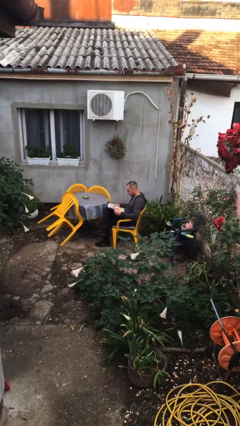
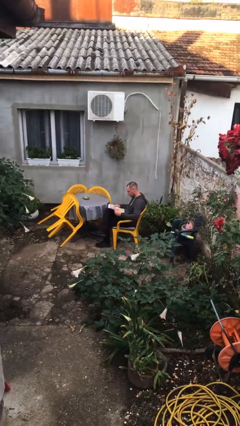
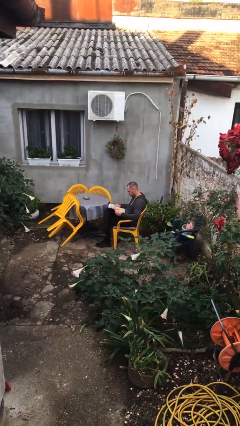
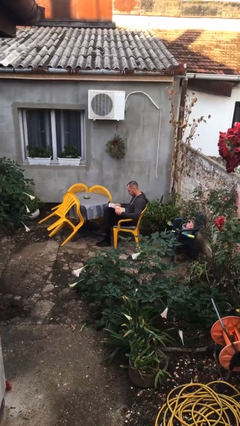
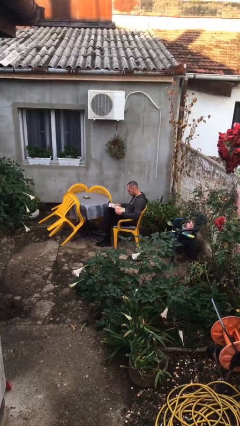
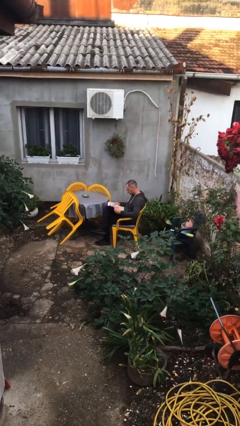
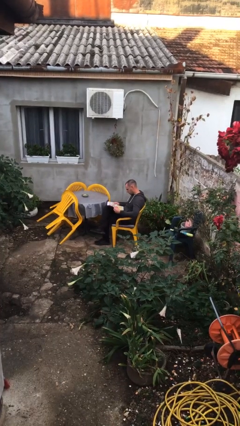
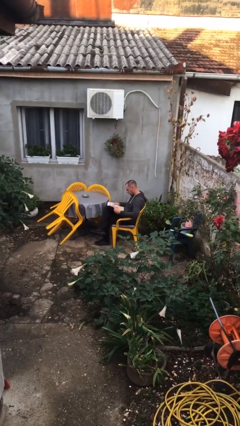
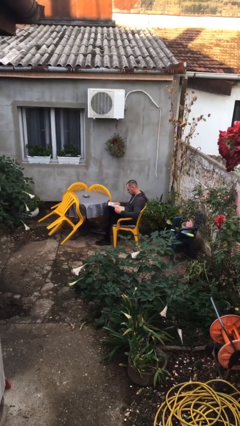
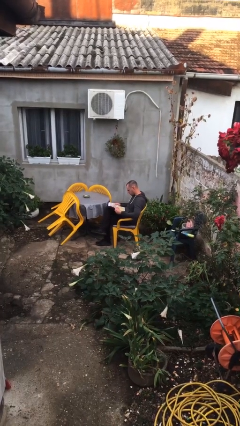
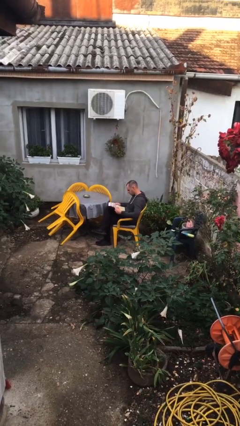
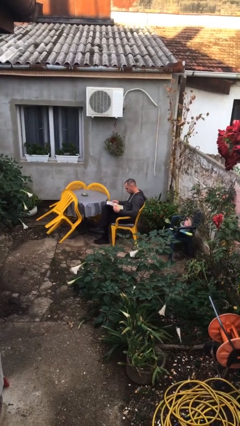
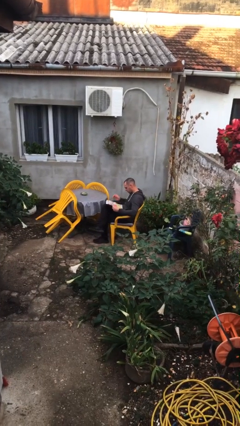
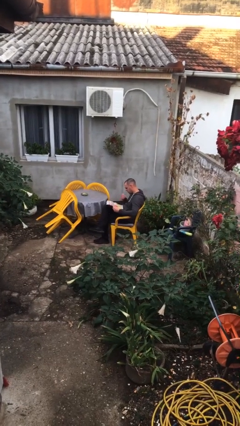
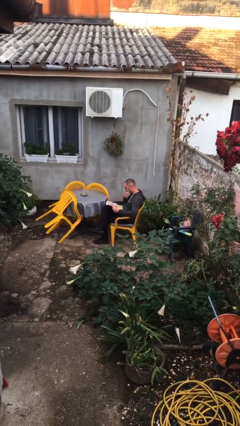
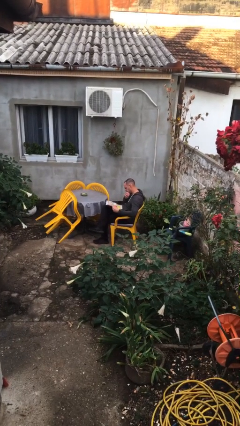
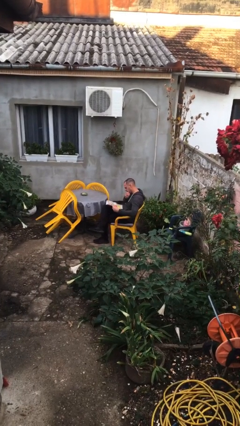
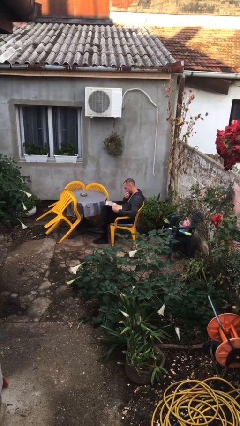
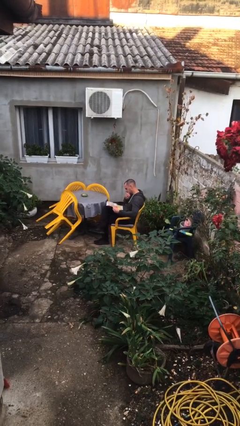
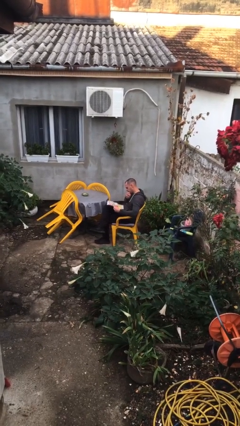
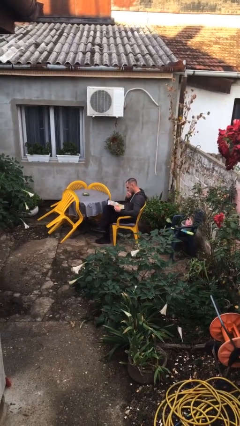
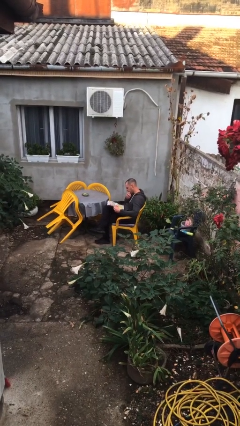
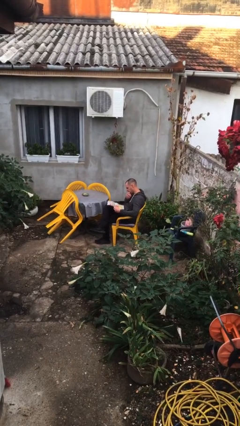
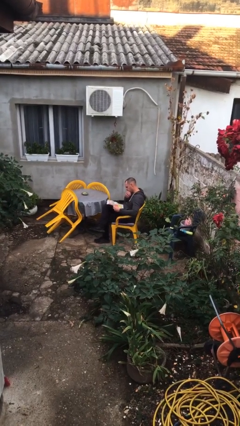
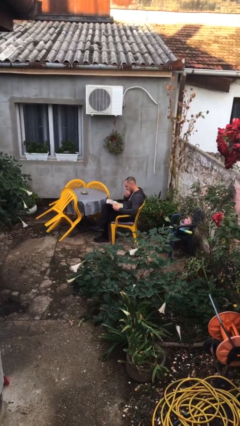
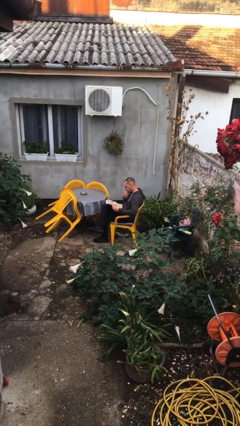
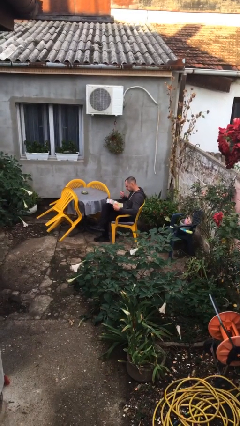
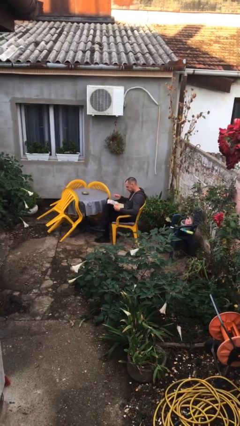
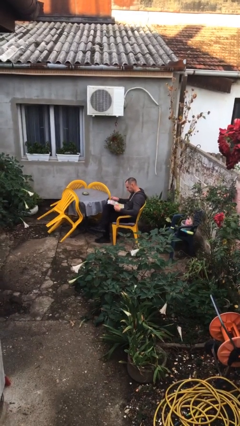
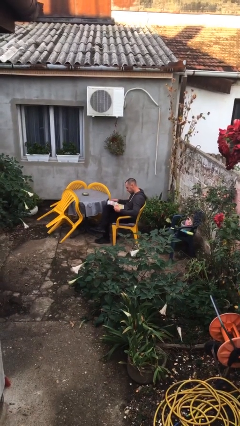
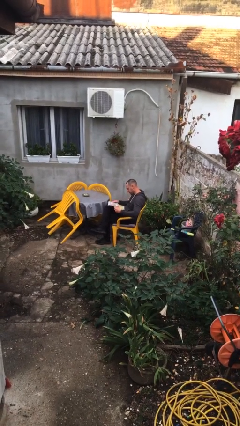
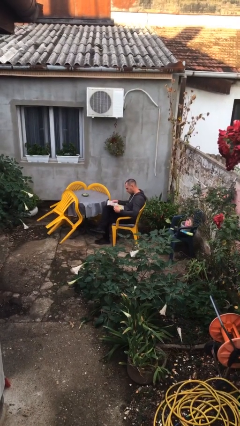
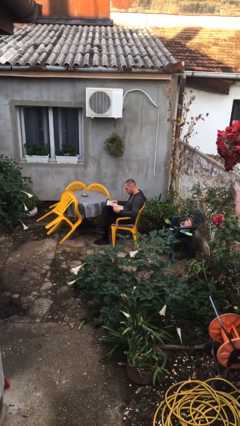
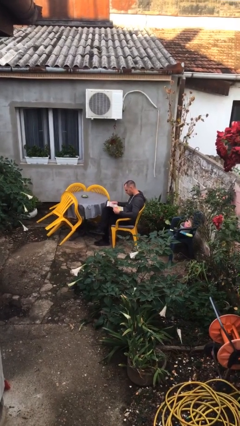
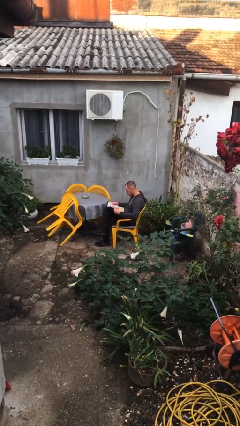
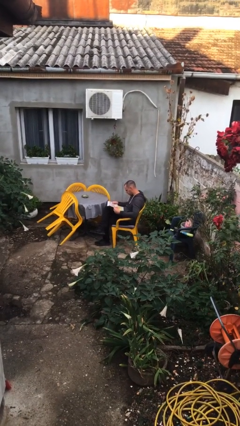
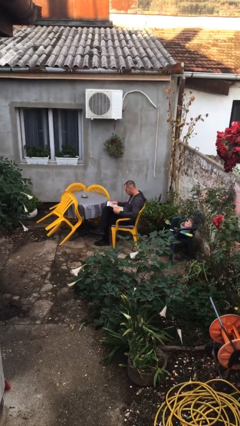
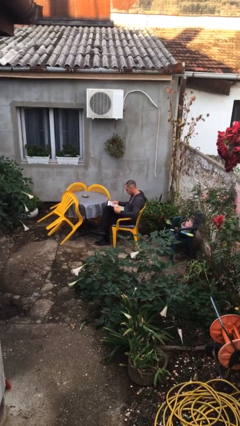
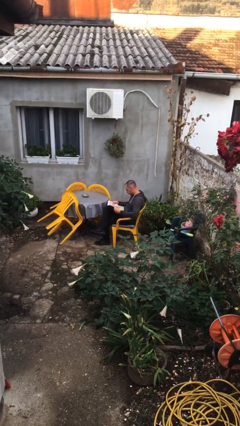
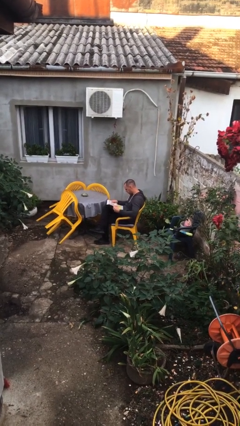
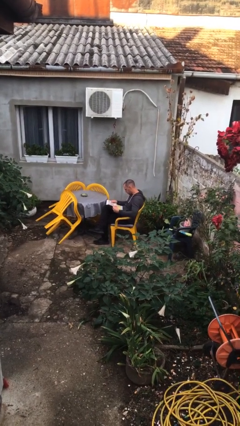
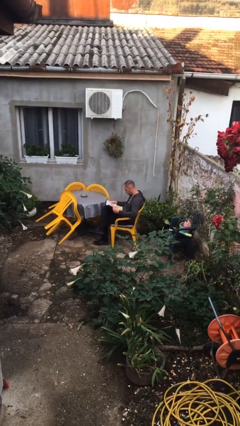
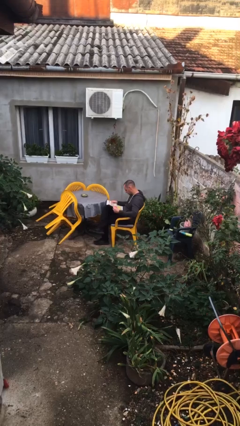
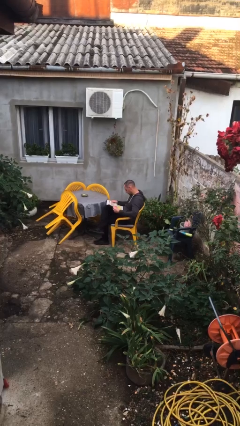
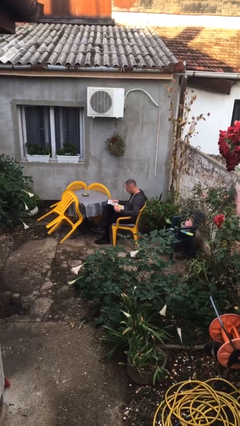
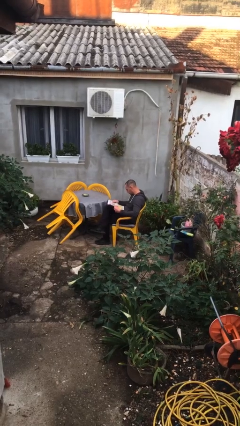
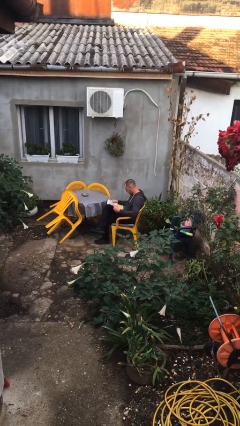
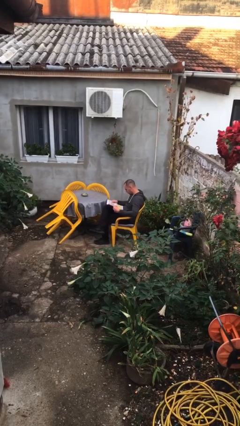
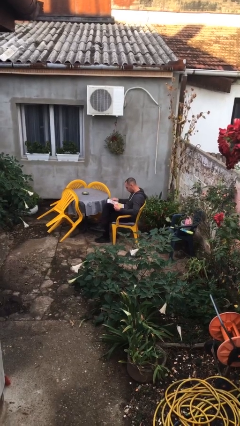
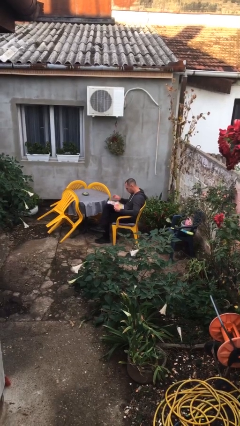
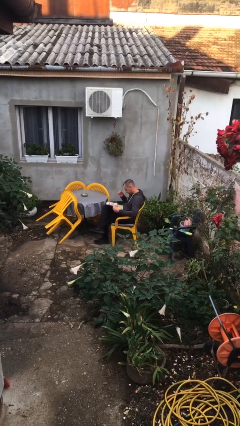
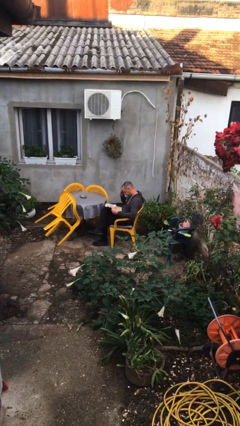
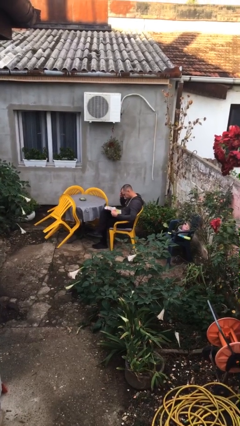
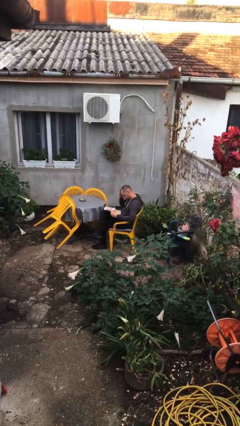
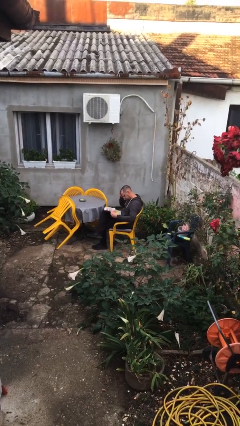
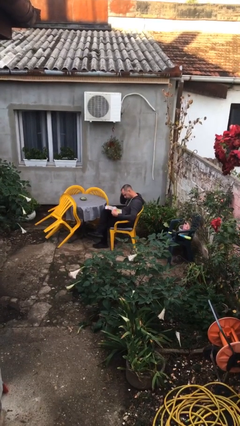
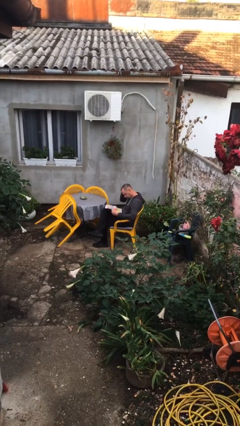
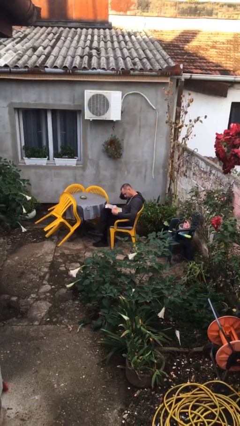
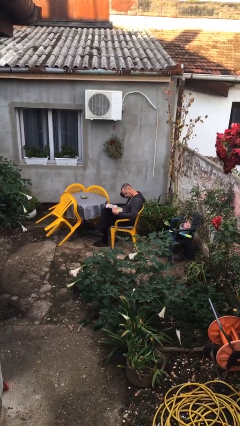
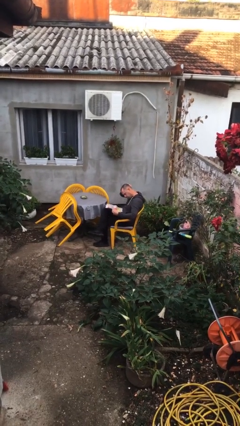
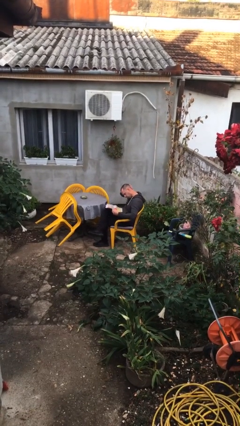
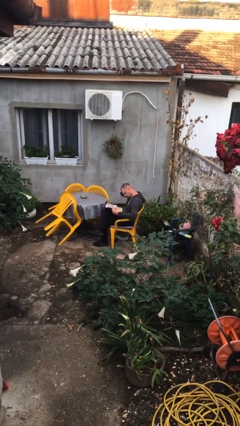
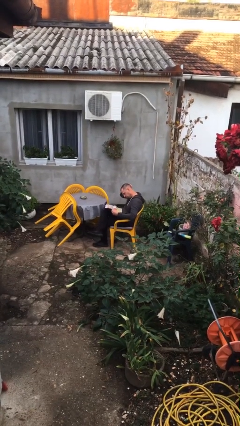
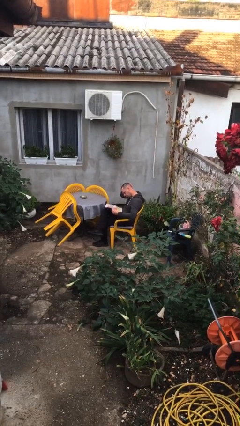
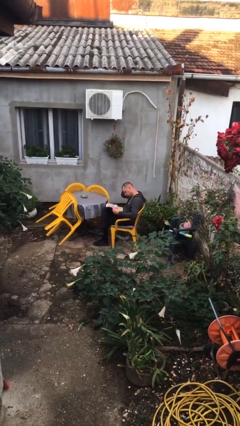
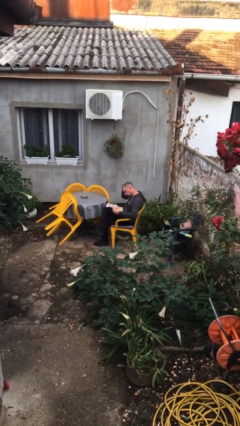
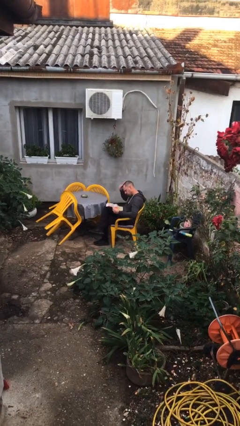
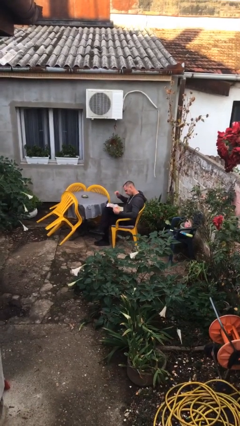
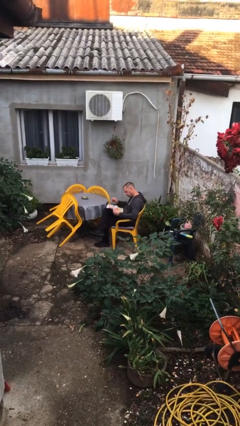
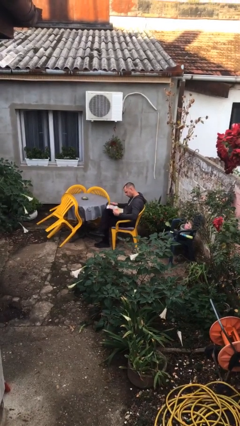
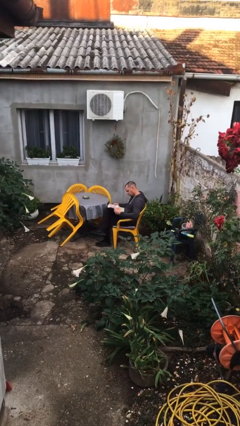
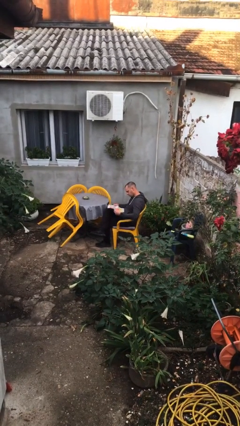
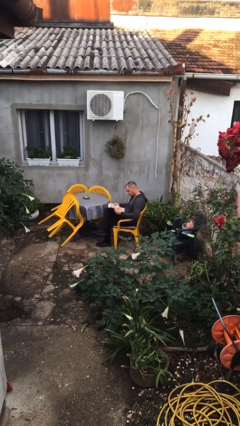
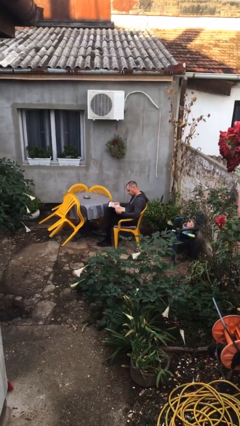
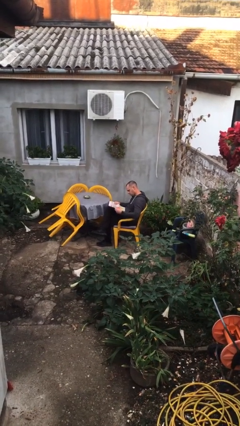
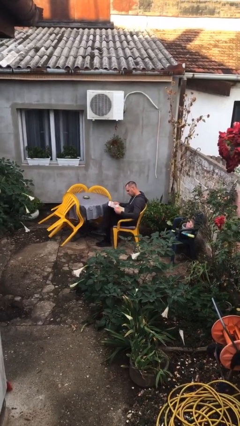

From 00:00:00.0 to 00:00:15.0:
person reads document

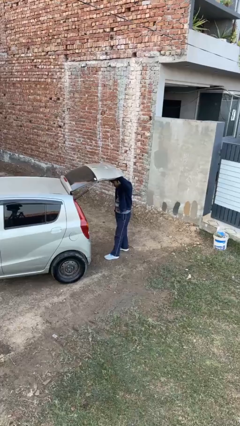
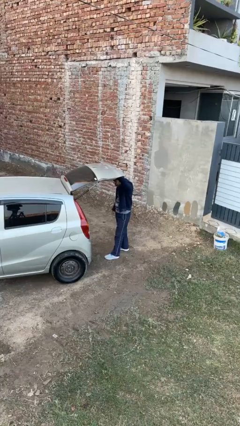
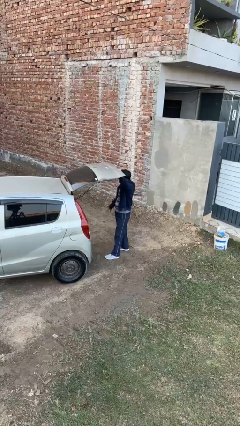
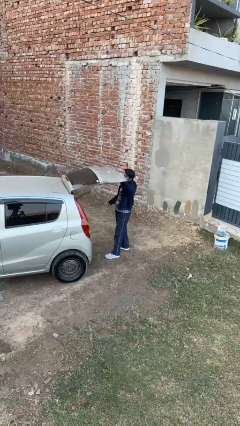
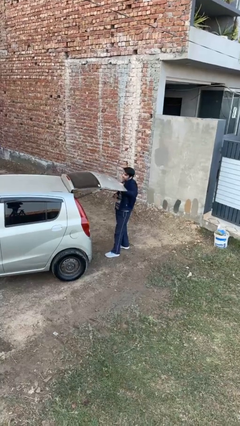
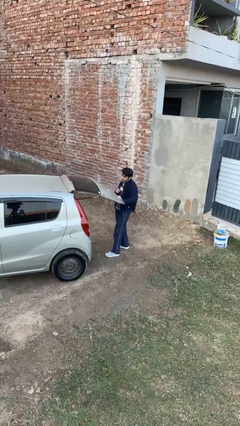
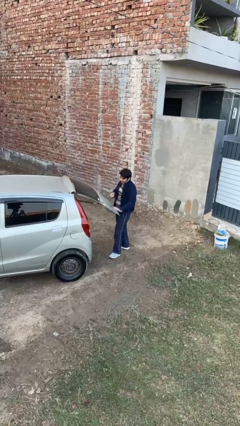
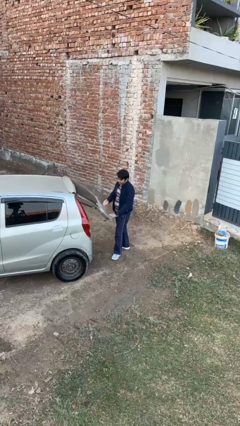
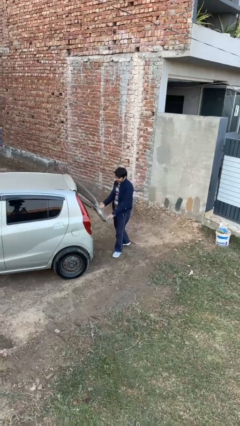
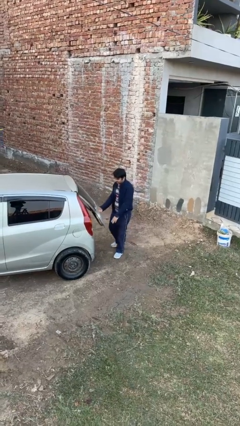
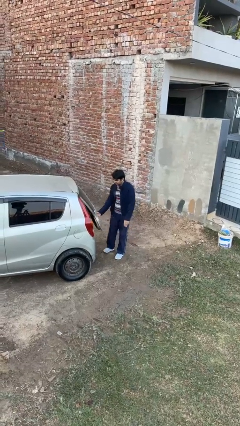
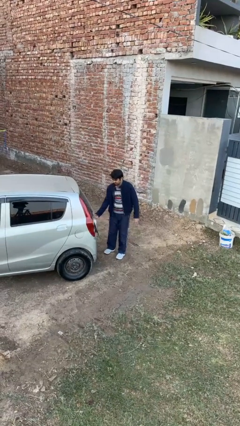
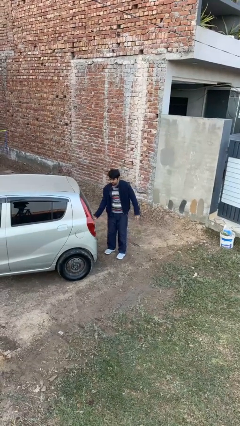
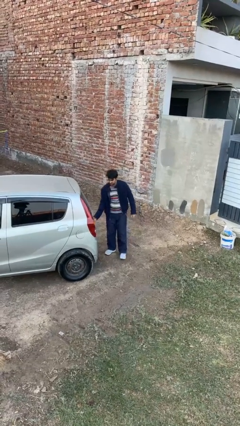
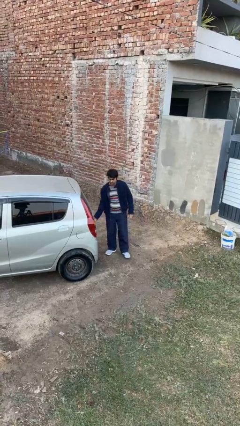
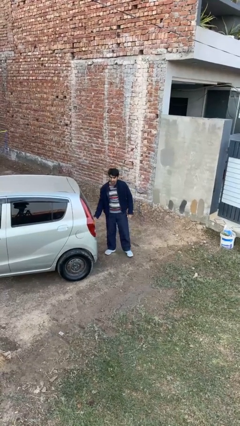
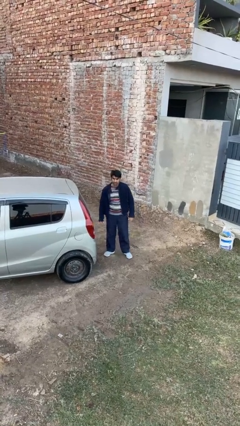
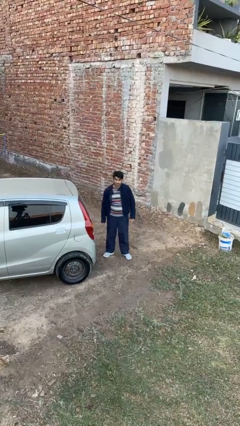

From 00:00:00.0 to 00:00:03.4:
person closes car trunk
